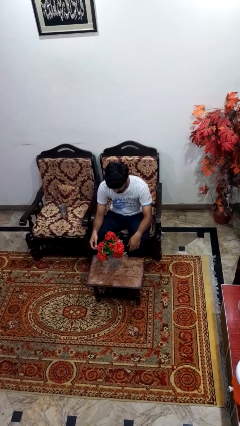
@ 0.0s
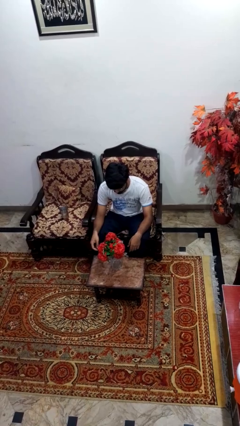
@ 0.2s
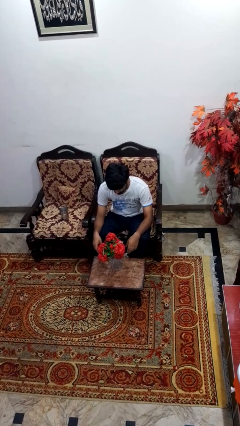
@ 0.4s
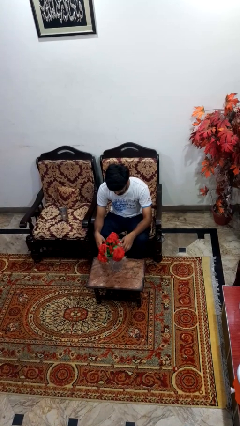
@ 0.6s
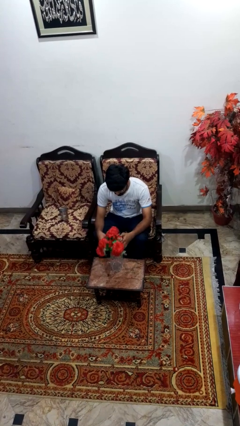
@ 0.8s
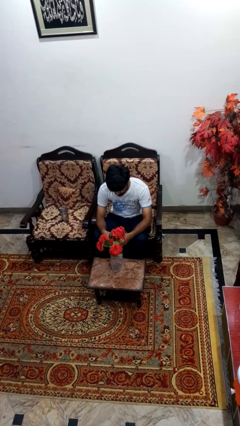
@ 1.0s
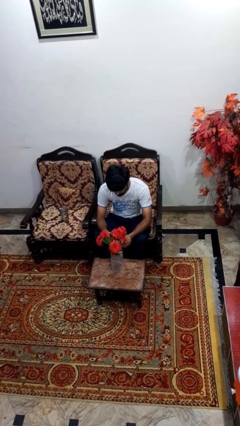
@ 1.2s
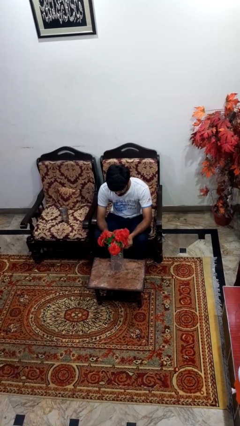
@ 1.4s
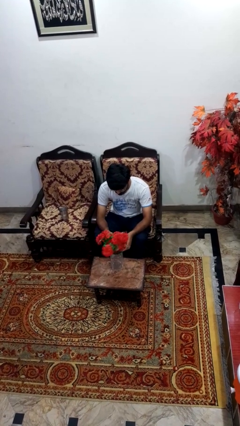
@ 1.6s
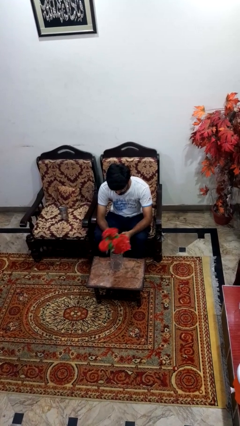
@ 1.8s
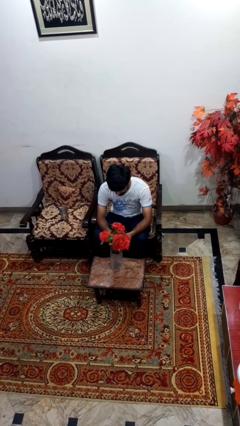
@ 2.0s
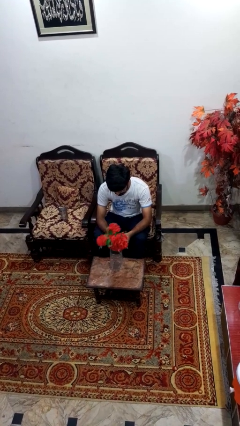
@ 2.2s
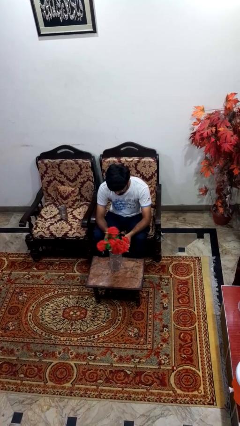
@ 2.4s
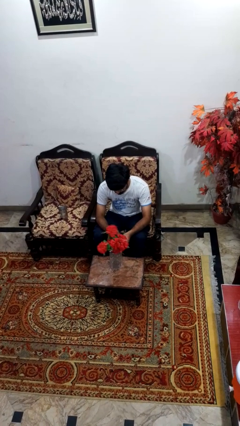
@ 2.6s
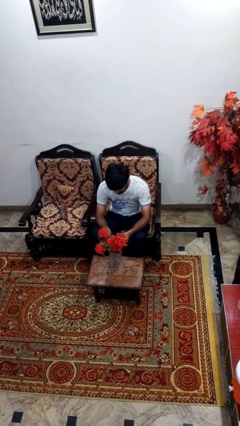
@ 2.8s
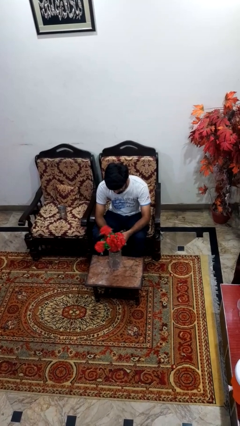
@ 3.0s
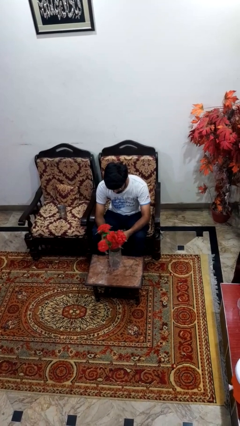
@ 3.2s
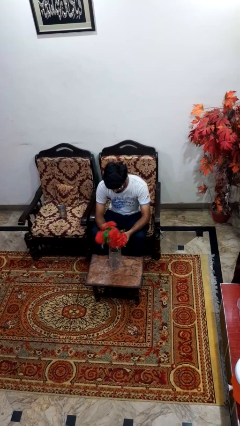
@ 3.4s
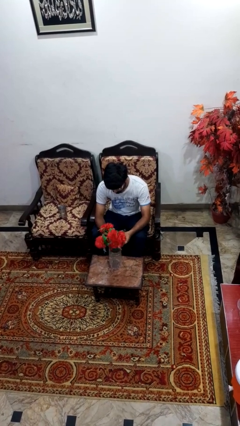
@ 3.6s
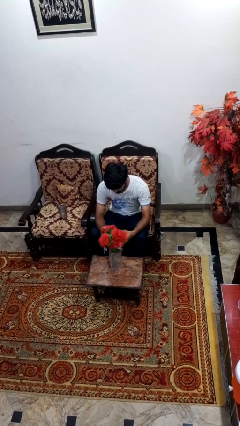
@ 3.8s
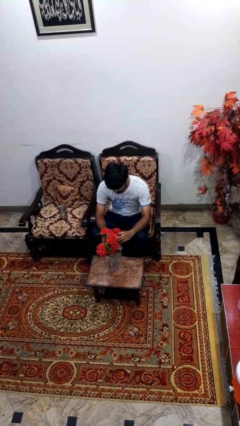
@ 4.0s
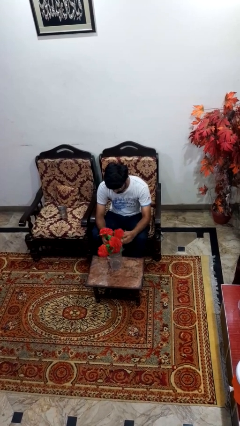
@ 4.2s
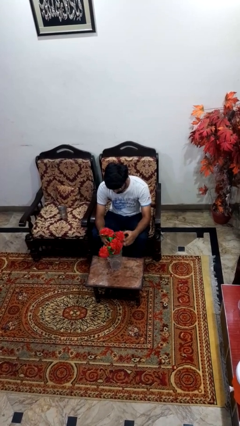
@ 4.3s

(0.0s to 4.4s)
person arranges flowers in vase

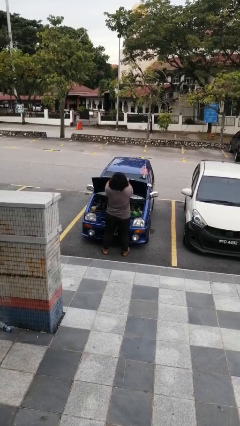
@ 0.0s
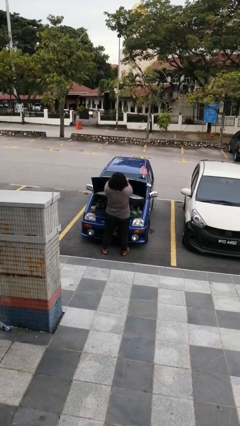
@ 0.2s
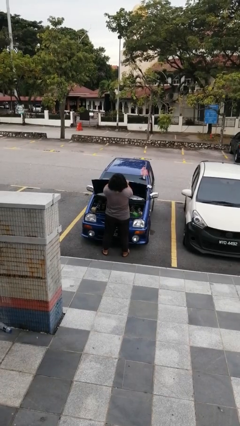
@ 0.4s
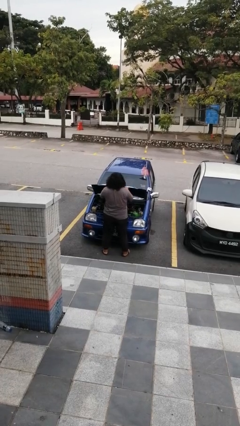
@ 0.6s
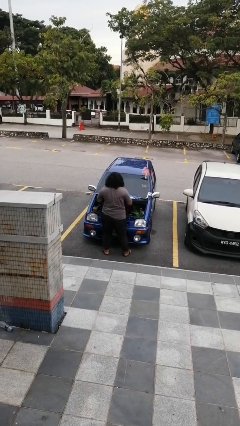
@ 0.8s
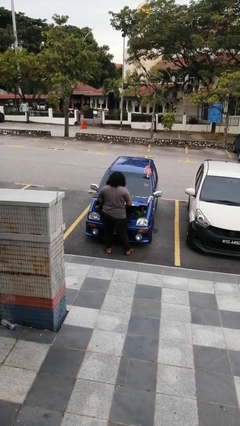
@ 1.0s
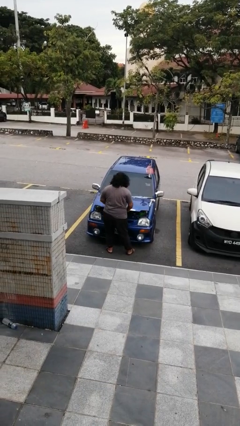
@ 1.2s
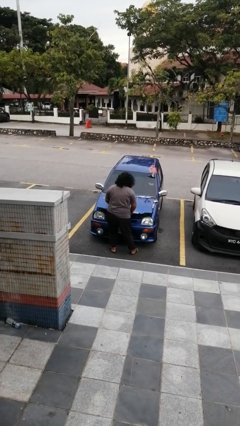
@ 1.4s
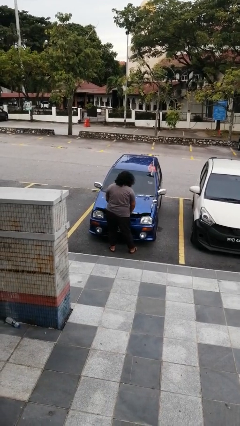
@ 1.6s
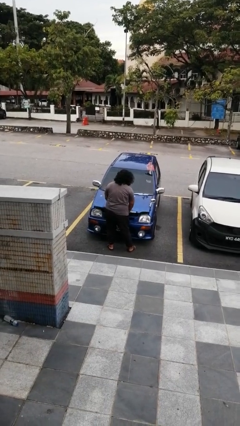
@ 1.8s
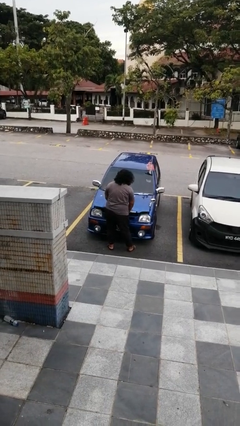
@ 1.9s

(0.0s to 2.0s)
person closes car hood

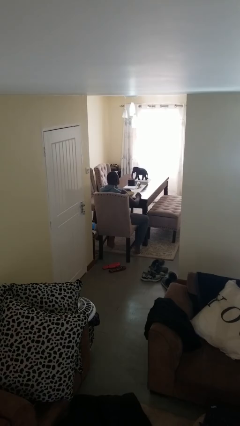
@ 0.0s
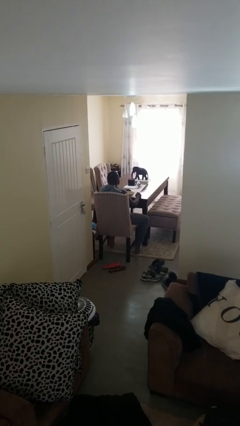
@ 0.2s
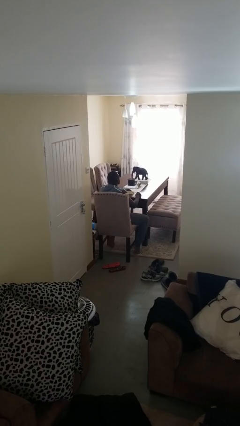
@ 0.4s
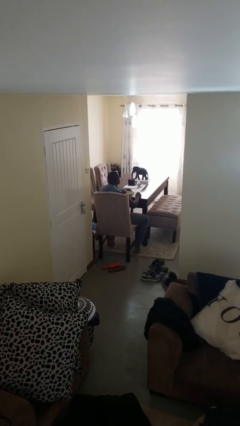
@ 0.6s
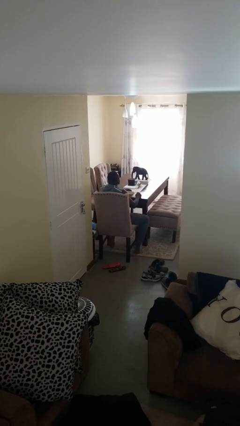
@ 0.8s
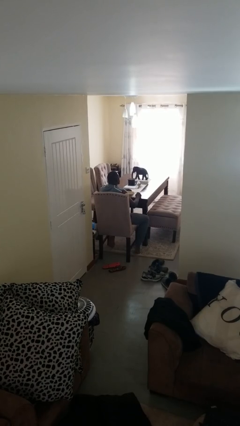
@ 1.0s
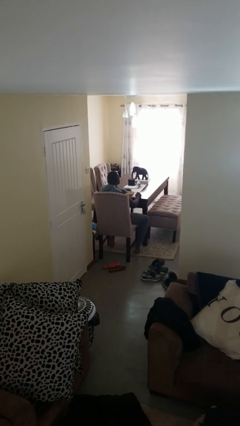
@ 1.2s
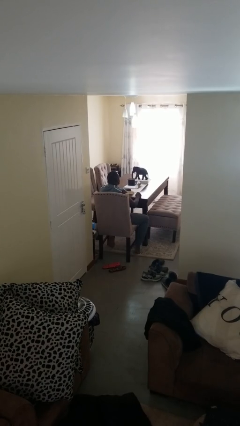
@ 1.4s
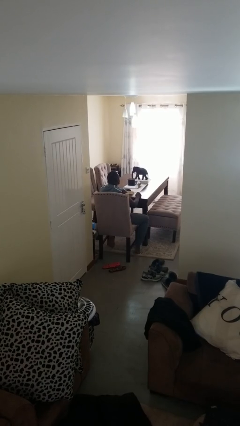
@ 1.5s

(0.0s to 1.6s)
person eats with utensil

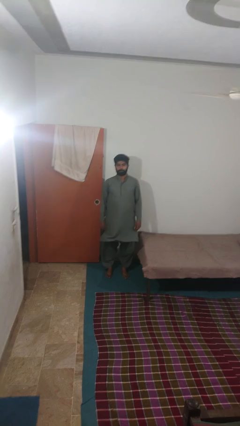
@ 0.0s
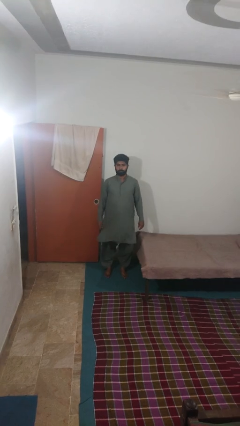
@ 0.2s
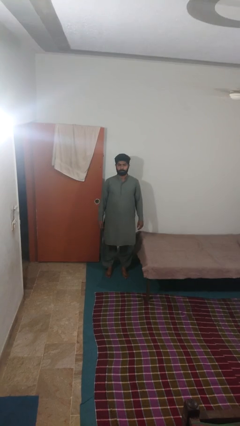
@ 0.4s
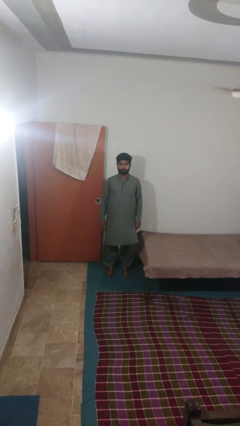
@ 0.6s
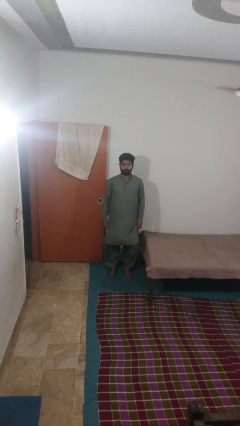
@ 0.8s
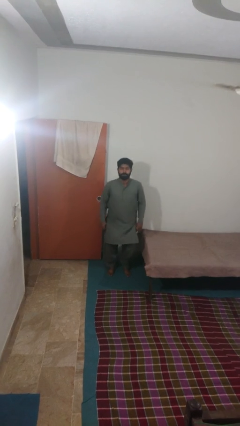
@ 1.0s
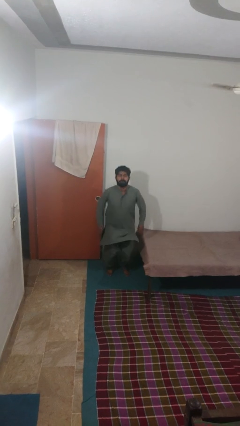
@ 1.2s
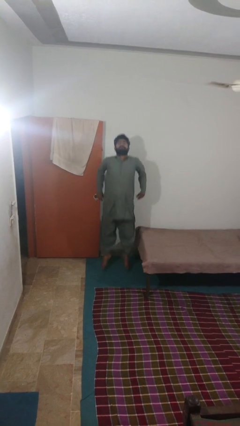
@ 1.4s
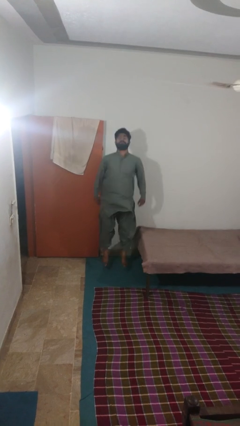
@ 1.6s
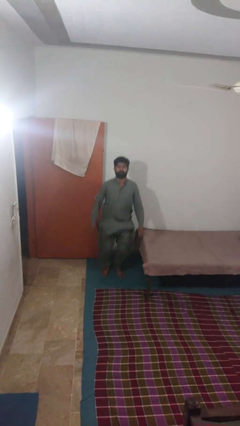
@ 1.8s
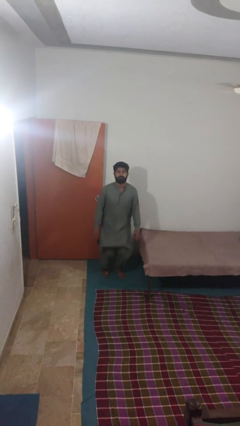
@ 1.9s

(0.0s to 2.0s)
person jumps

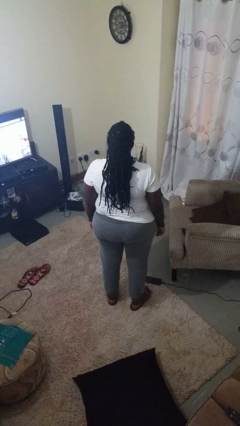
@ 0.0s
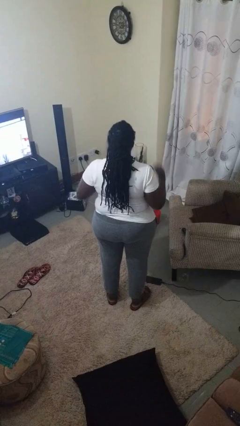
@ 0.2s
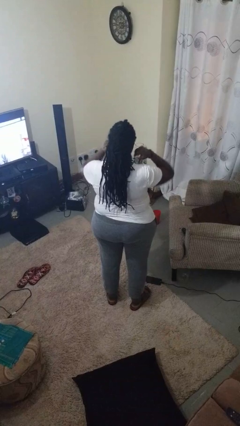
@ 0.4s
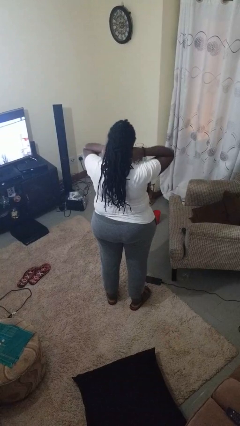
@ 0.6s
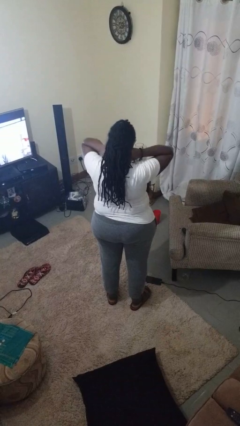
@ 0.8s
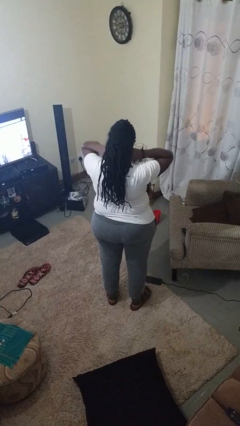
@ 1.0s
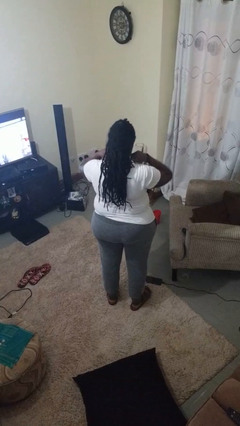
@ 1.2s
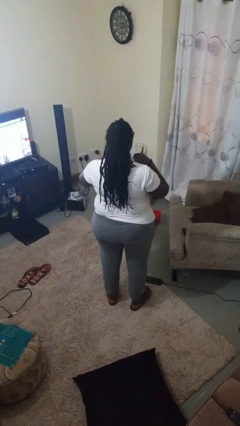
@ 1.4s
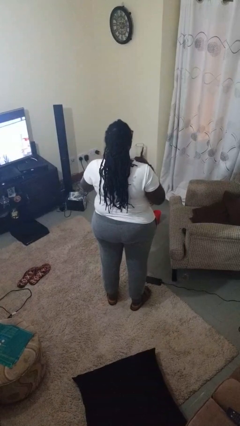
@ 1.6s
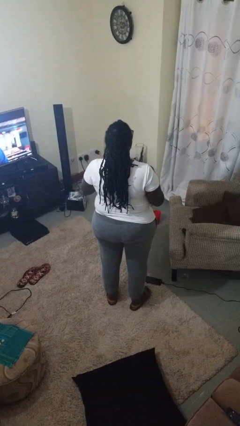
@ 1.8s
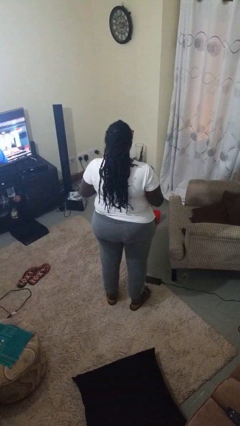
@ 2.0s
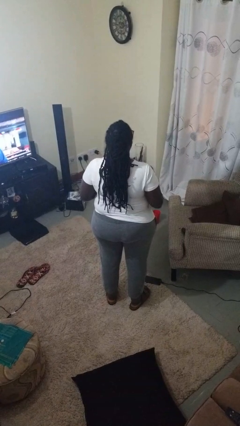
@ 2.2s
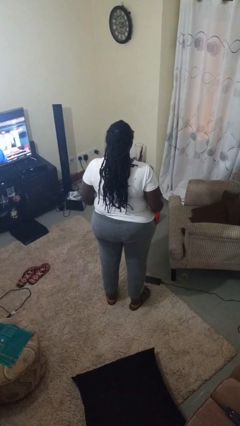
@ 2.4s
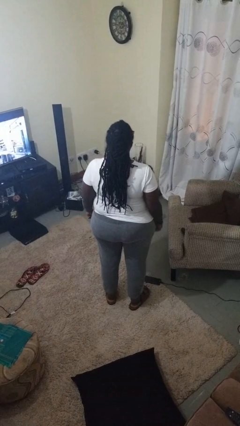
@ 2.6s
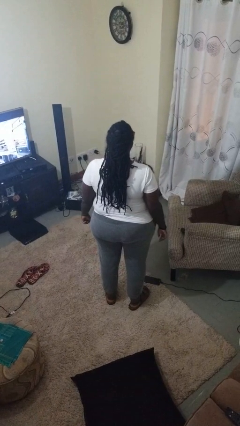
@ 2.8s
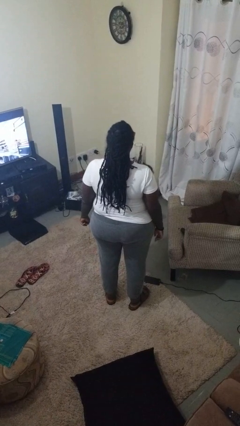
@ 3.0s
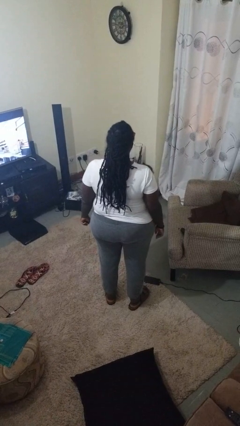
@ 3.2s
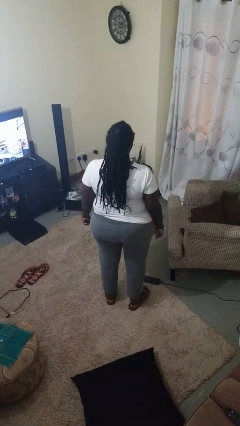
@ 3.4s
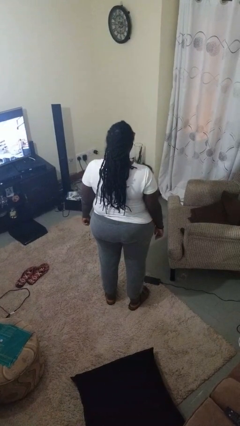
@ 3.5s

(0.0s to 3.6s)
person takes off necklace

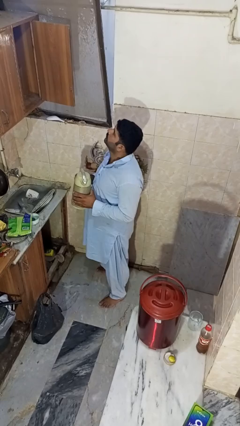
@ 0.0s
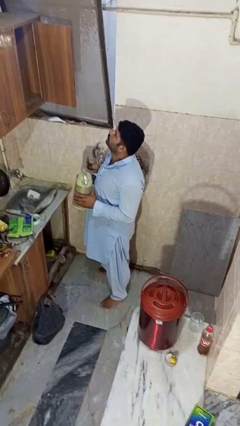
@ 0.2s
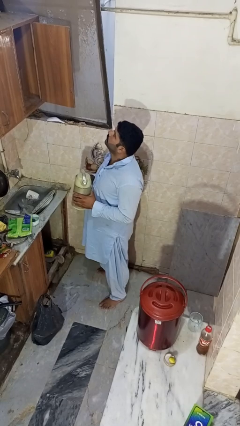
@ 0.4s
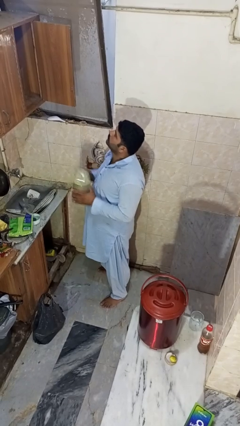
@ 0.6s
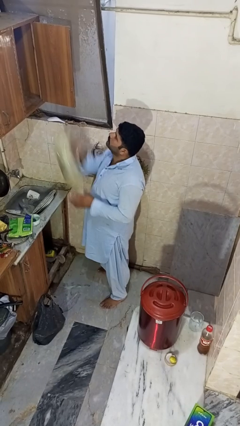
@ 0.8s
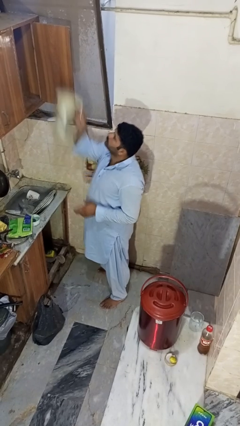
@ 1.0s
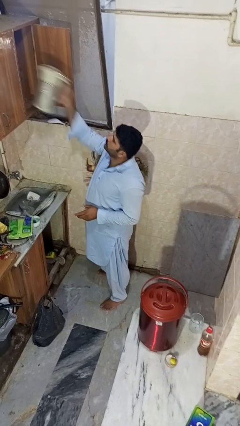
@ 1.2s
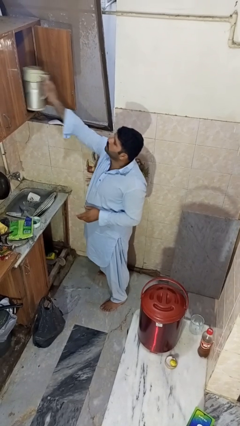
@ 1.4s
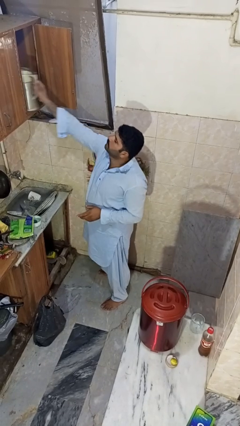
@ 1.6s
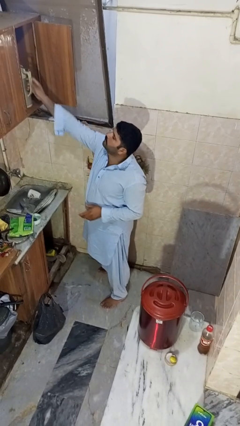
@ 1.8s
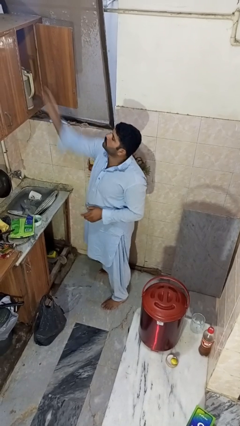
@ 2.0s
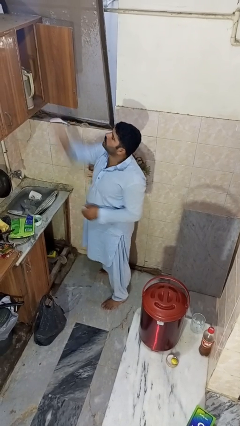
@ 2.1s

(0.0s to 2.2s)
person puts object in cabinet

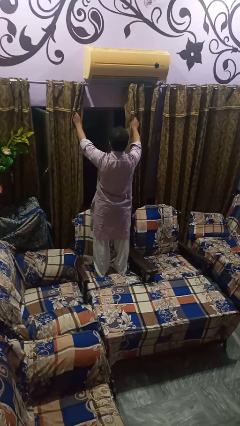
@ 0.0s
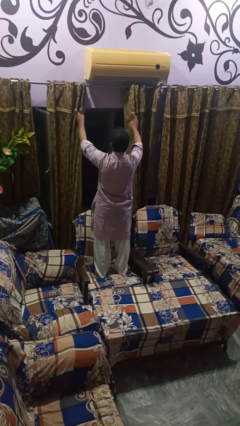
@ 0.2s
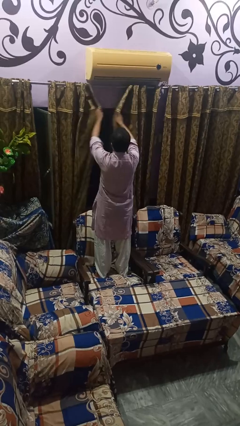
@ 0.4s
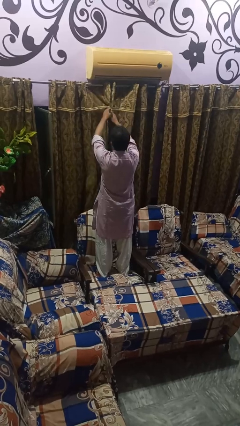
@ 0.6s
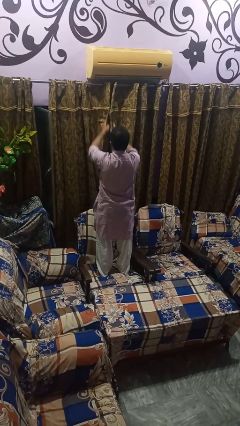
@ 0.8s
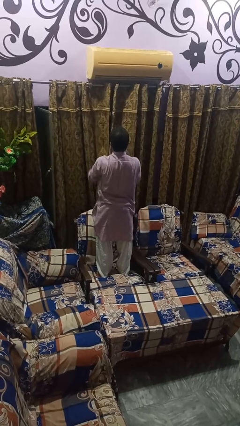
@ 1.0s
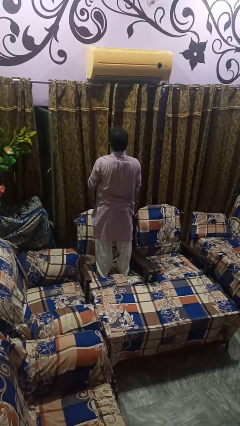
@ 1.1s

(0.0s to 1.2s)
person closes curtains
